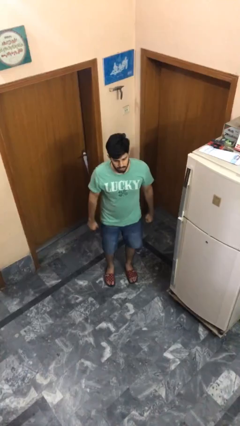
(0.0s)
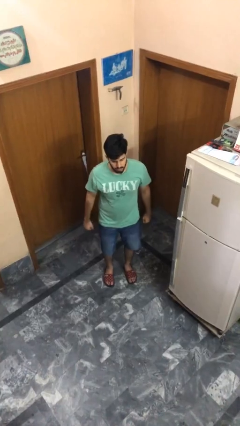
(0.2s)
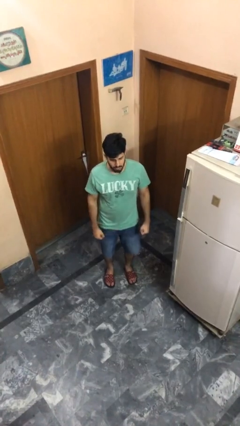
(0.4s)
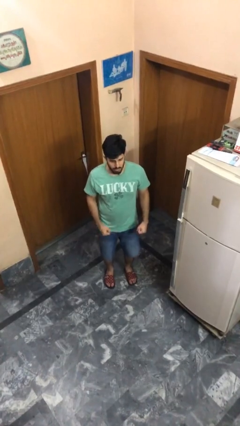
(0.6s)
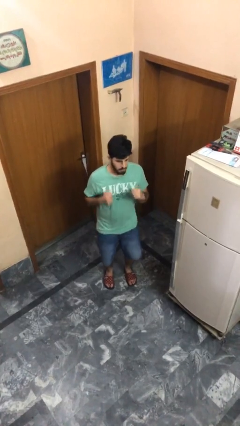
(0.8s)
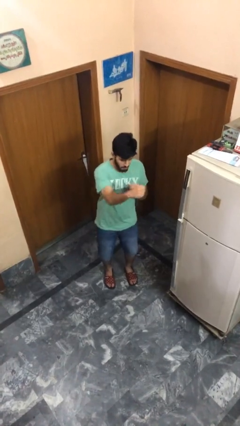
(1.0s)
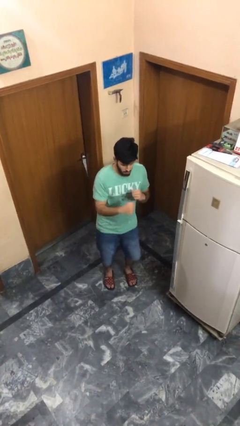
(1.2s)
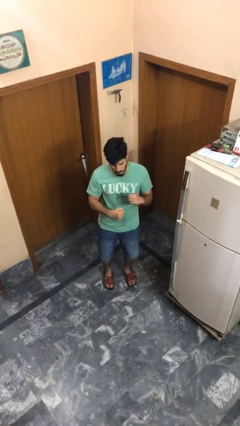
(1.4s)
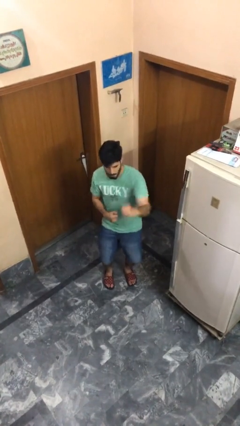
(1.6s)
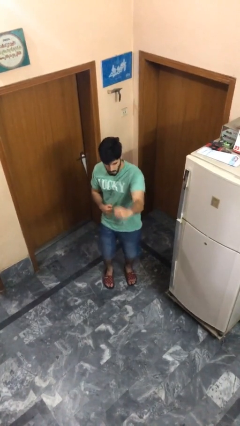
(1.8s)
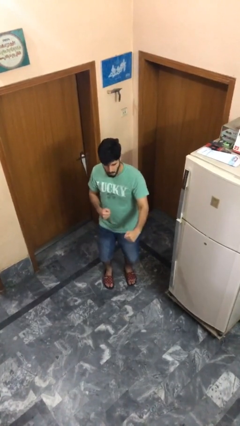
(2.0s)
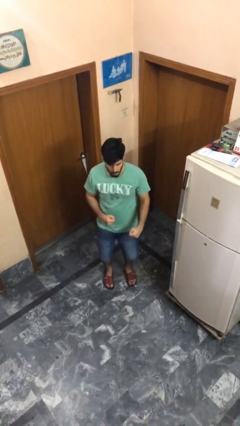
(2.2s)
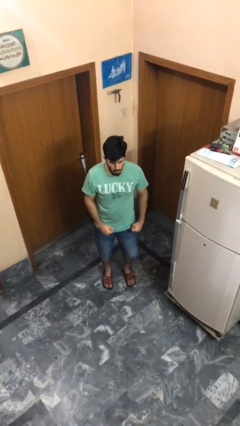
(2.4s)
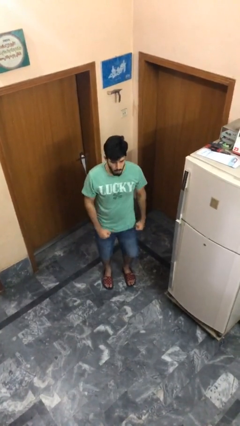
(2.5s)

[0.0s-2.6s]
person punches

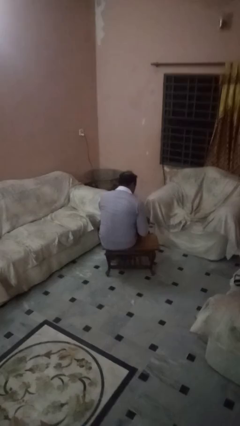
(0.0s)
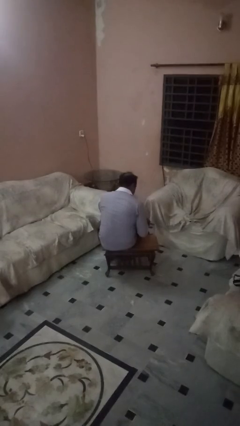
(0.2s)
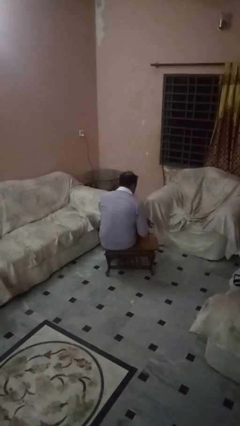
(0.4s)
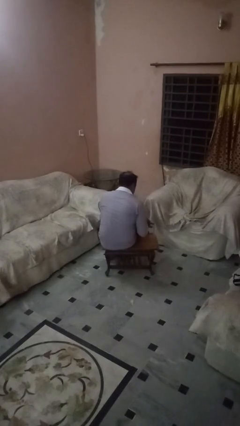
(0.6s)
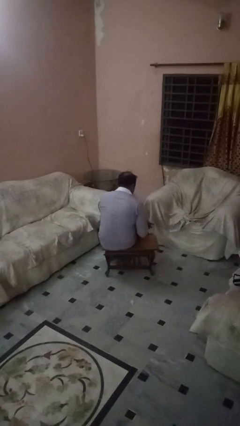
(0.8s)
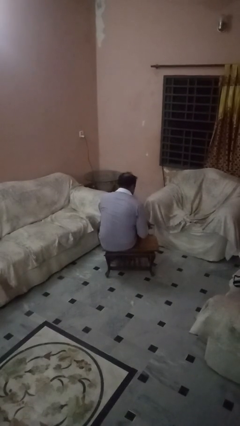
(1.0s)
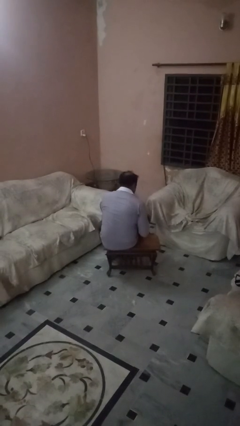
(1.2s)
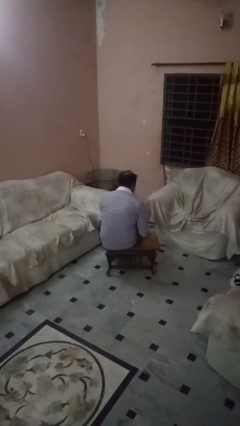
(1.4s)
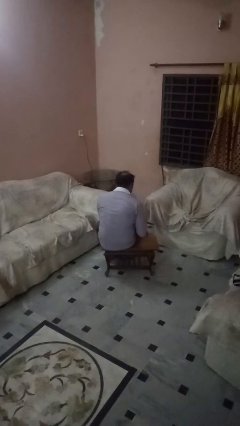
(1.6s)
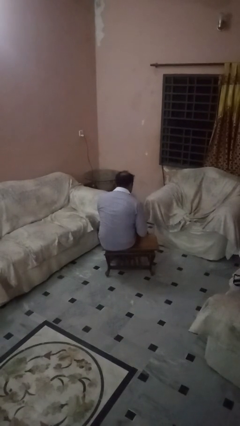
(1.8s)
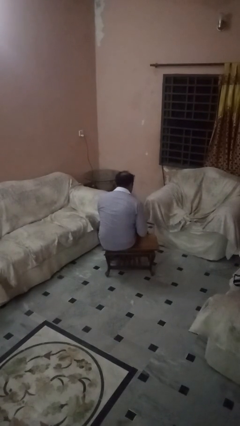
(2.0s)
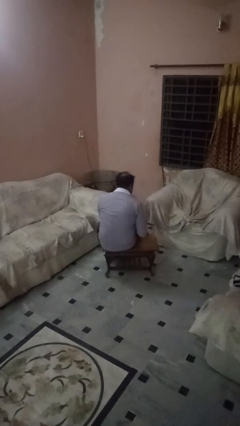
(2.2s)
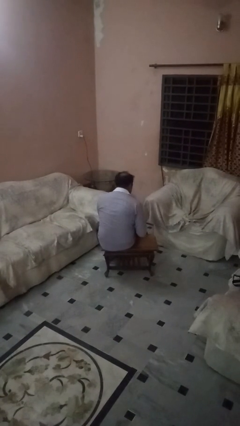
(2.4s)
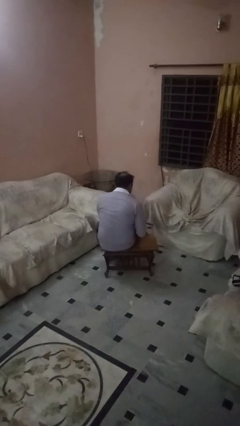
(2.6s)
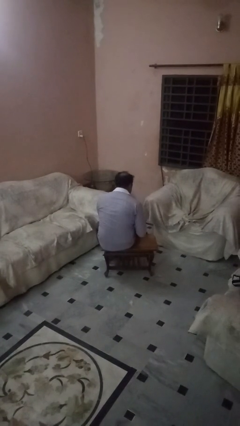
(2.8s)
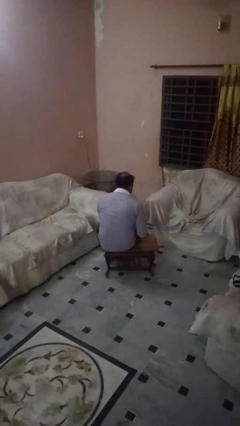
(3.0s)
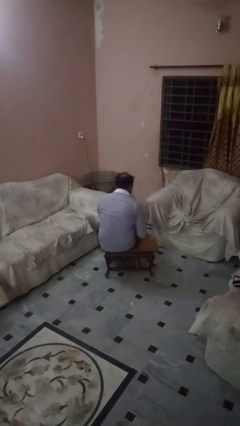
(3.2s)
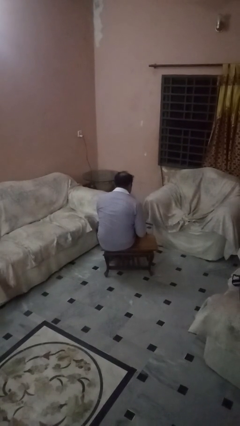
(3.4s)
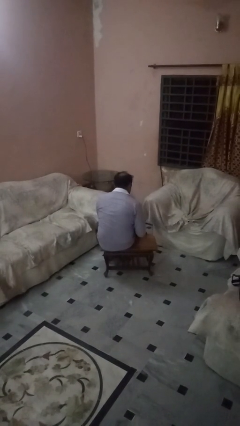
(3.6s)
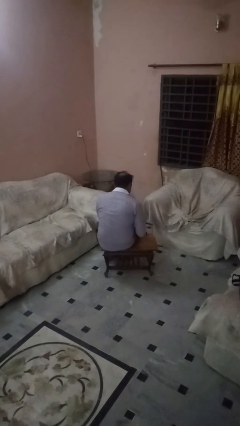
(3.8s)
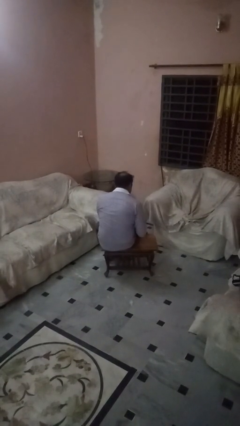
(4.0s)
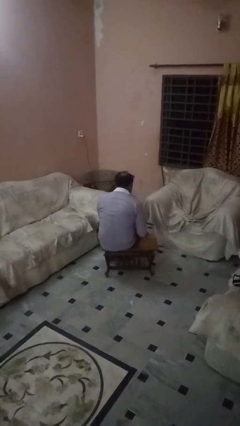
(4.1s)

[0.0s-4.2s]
person paints fingernails

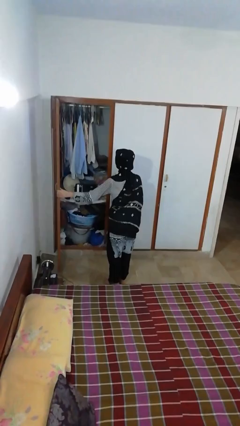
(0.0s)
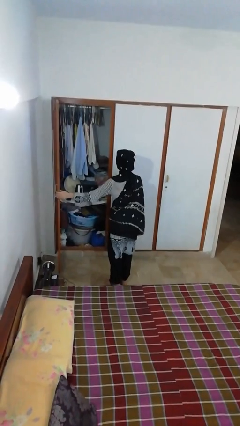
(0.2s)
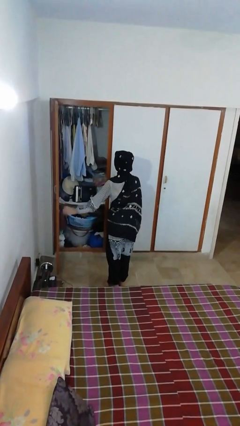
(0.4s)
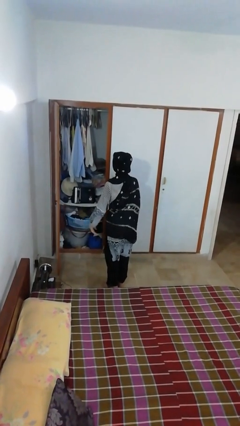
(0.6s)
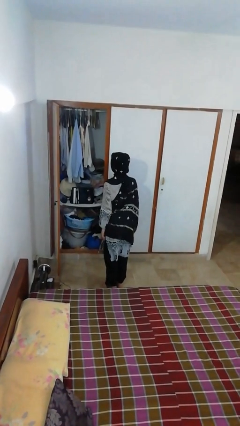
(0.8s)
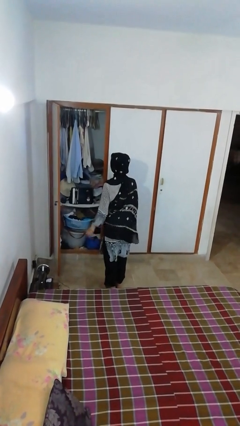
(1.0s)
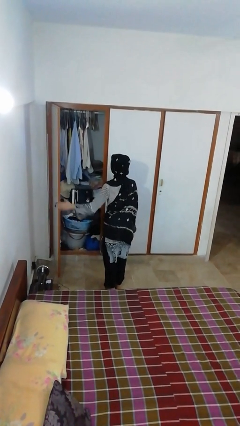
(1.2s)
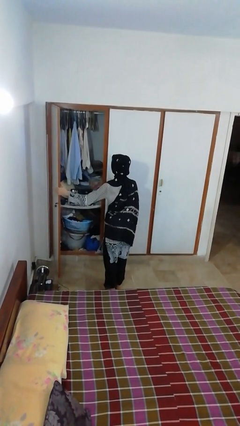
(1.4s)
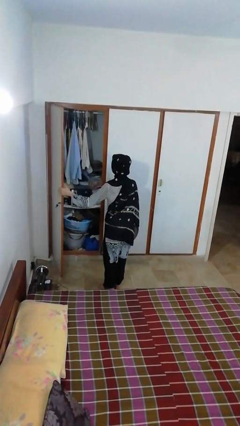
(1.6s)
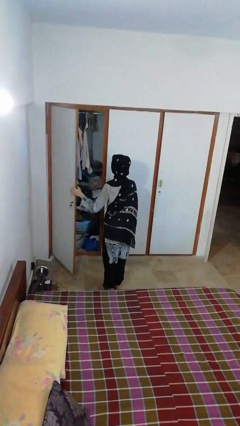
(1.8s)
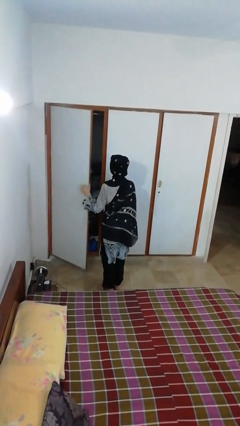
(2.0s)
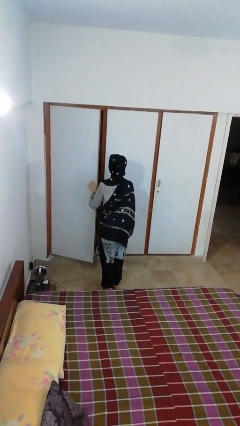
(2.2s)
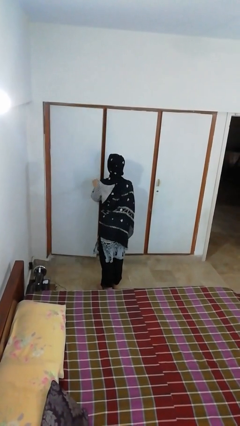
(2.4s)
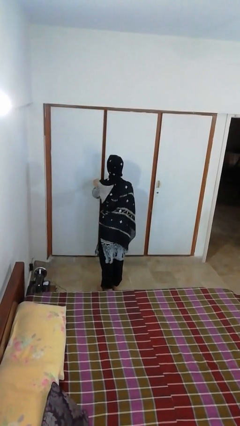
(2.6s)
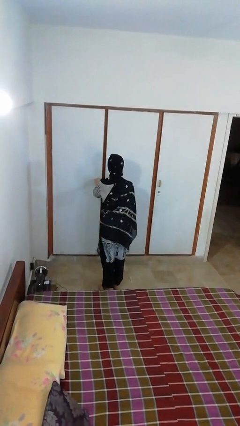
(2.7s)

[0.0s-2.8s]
person closes closet door

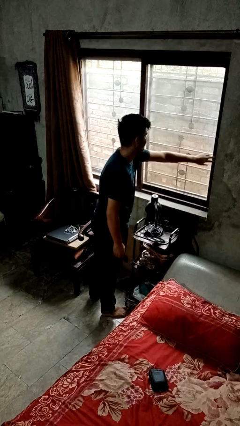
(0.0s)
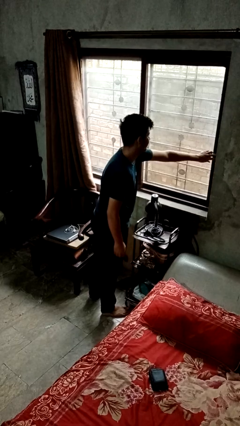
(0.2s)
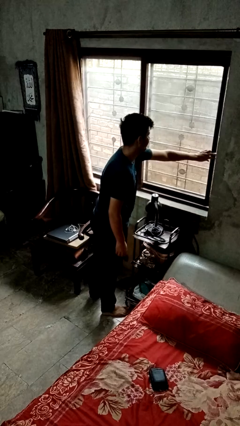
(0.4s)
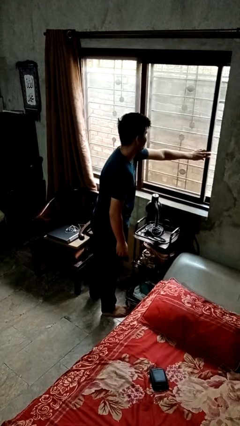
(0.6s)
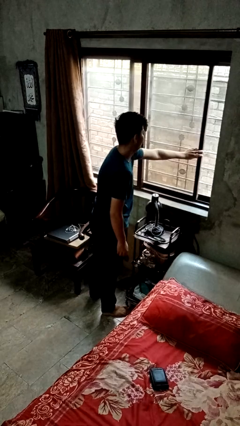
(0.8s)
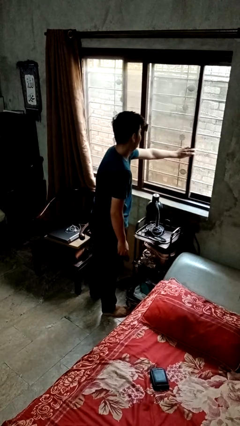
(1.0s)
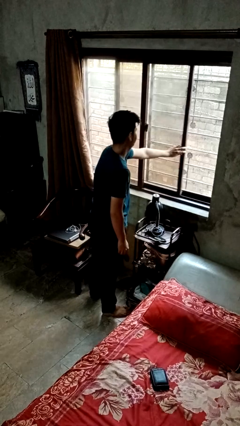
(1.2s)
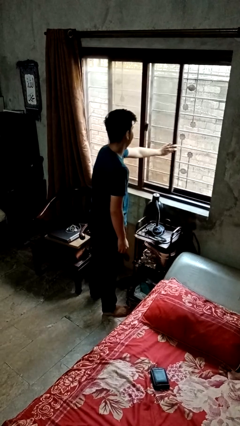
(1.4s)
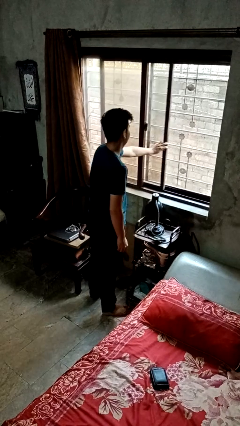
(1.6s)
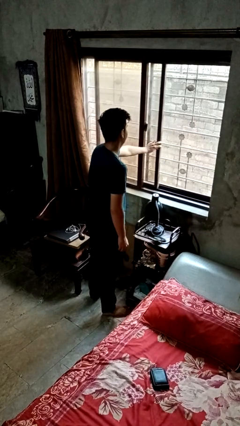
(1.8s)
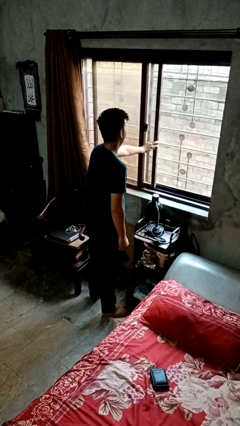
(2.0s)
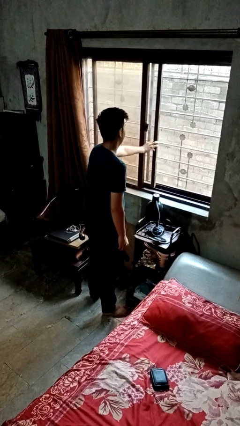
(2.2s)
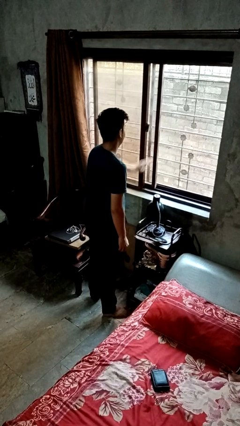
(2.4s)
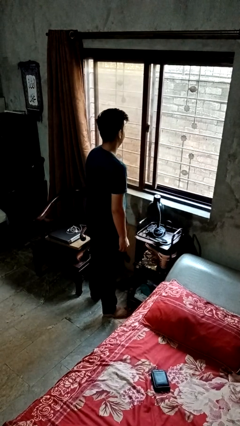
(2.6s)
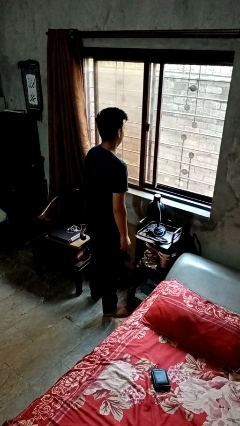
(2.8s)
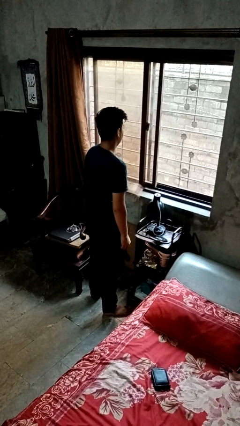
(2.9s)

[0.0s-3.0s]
person opens home window

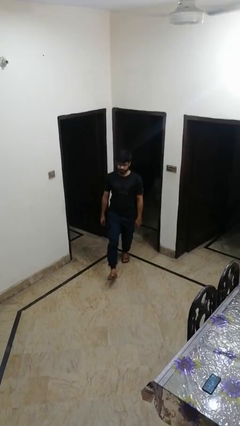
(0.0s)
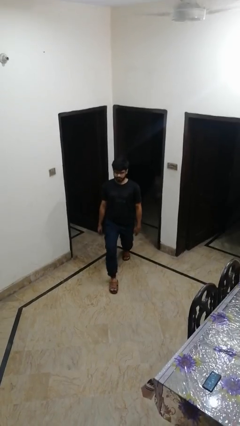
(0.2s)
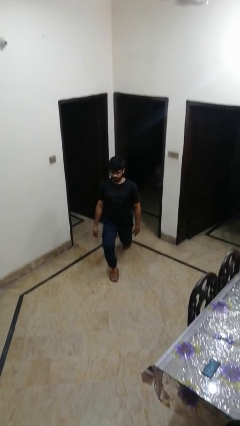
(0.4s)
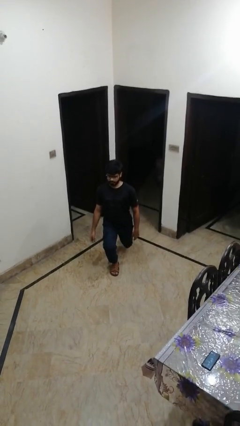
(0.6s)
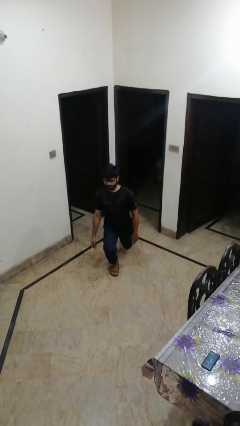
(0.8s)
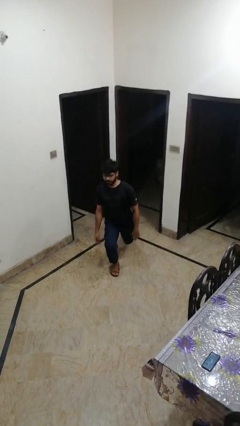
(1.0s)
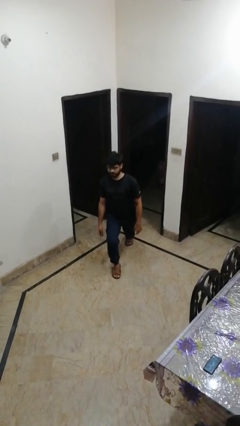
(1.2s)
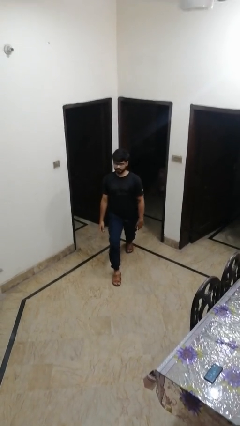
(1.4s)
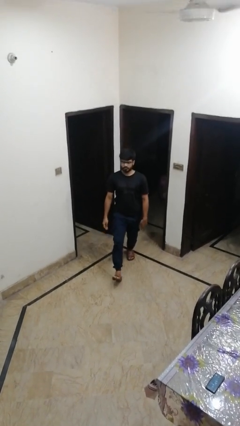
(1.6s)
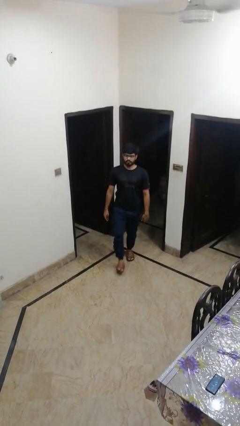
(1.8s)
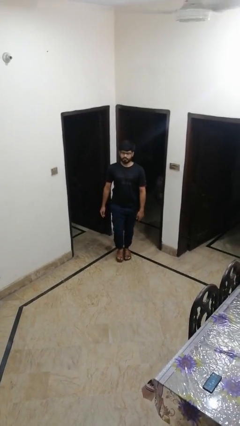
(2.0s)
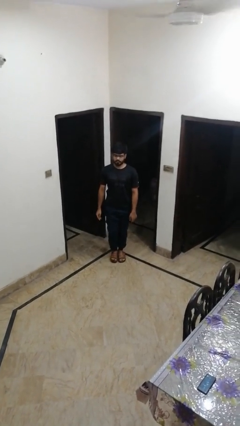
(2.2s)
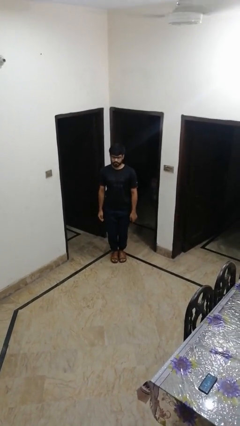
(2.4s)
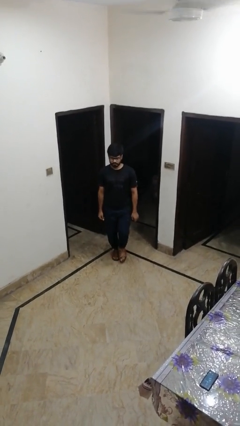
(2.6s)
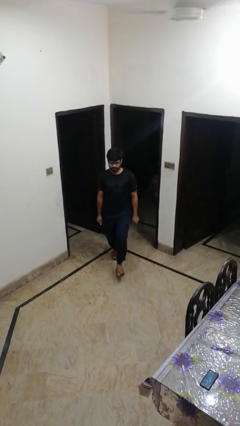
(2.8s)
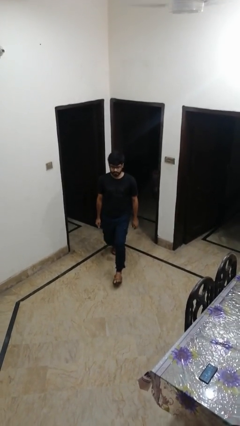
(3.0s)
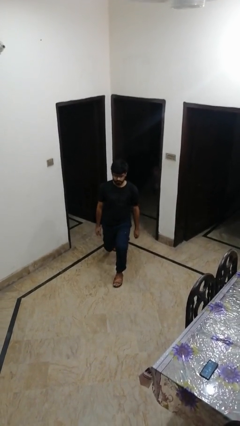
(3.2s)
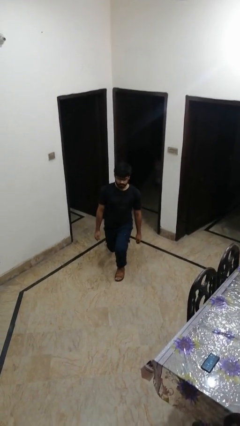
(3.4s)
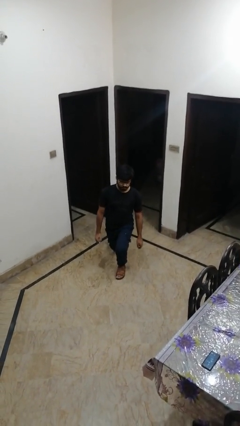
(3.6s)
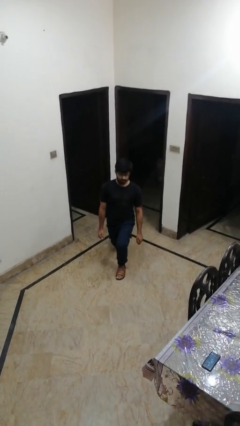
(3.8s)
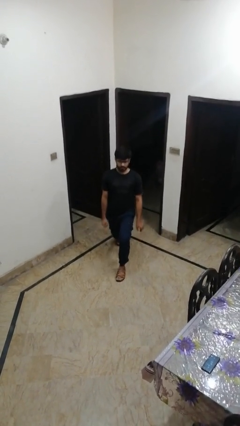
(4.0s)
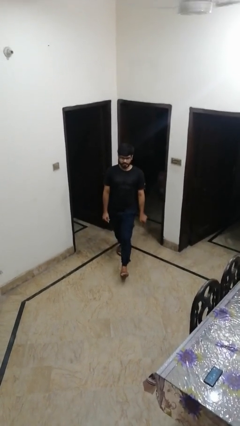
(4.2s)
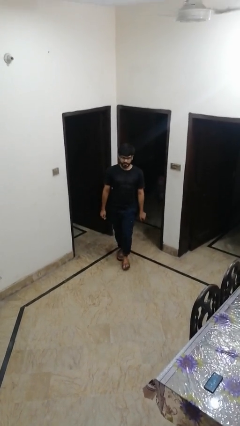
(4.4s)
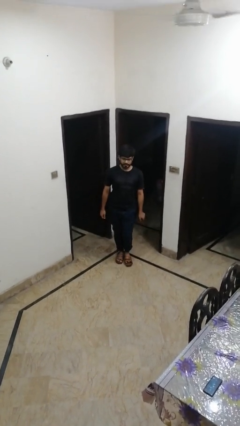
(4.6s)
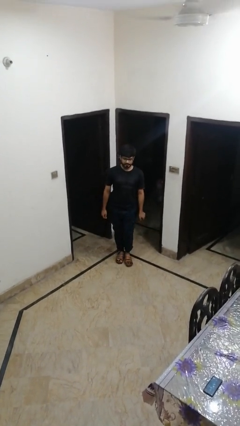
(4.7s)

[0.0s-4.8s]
person exercises with lunges

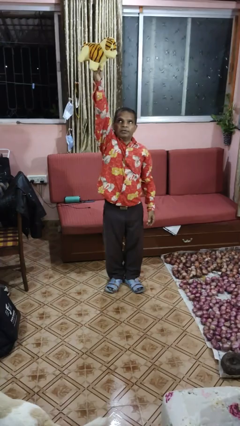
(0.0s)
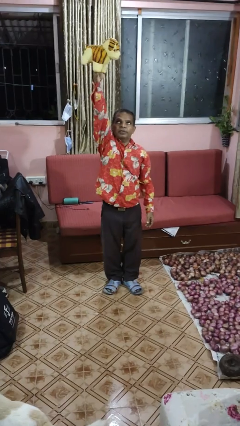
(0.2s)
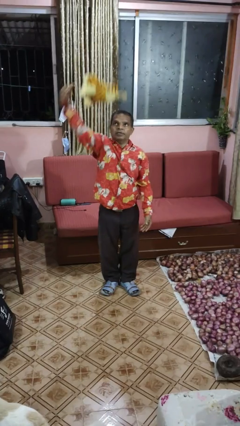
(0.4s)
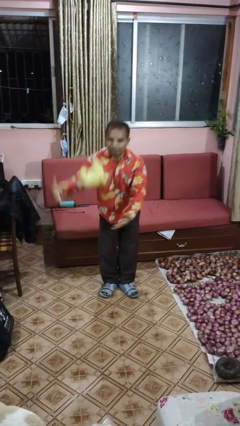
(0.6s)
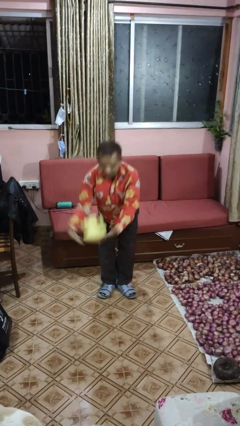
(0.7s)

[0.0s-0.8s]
person drops object
